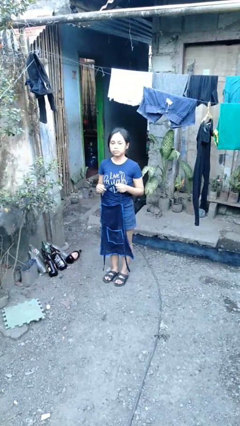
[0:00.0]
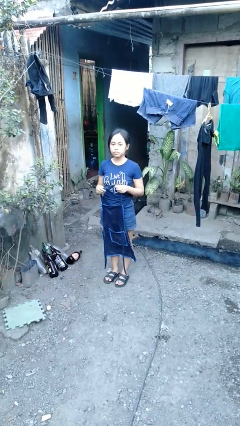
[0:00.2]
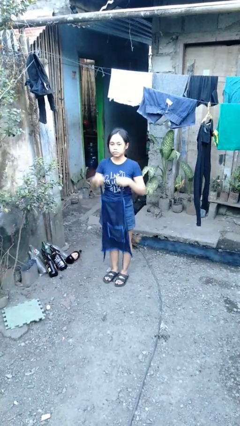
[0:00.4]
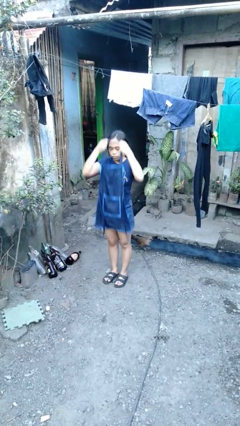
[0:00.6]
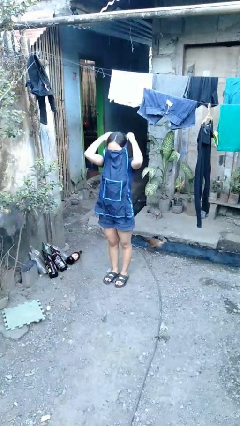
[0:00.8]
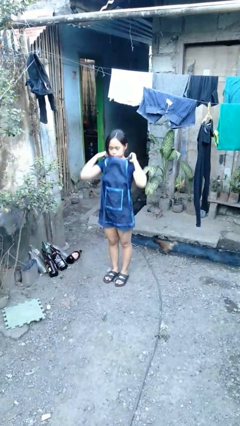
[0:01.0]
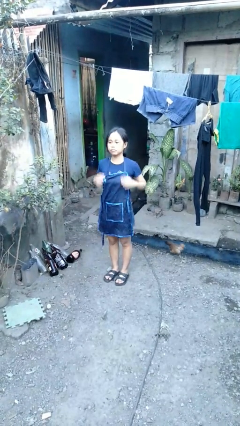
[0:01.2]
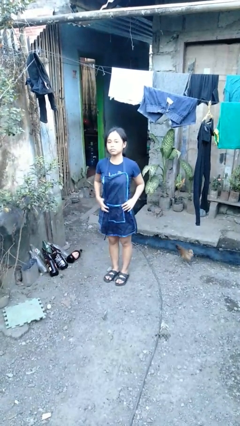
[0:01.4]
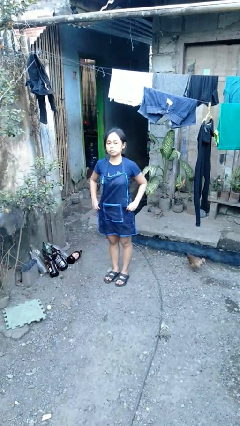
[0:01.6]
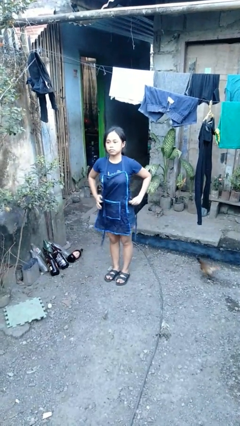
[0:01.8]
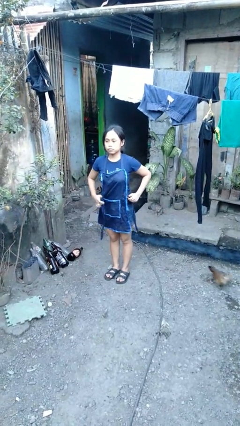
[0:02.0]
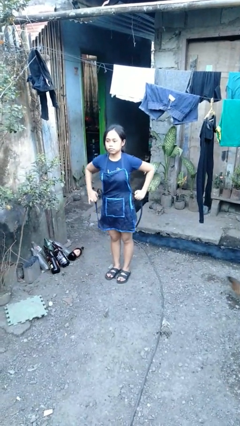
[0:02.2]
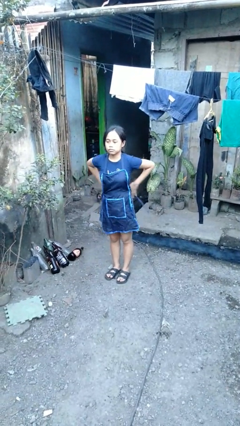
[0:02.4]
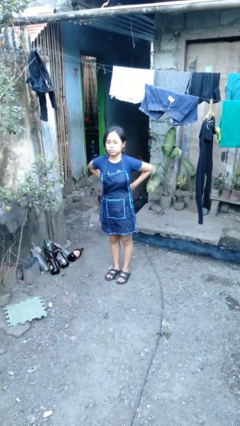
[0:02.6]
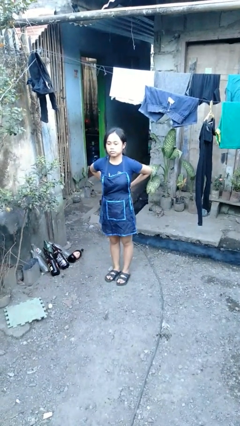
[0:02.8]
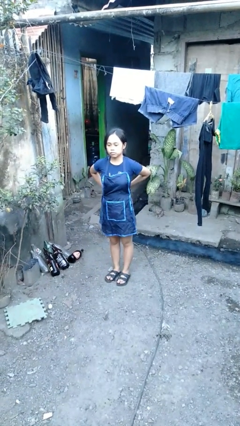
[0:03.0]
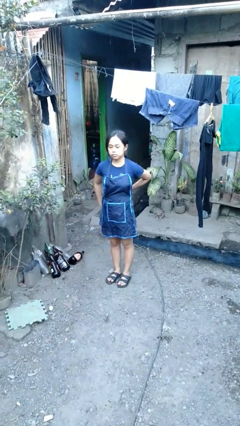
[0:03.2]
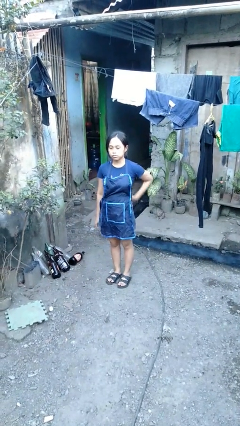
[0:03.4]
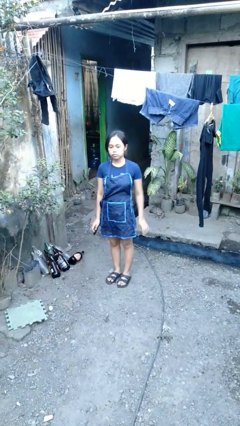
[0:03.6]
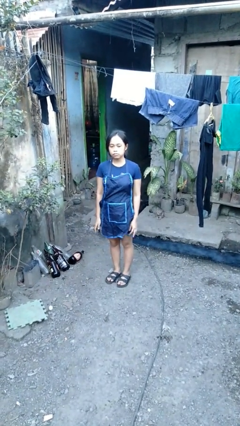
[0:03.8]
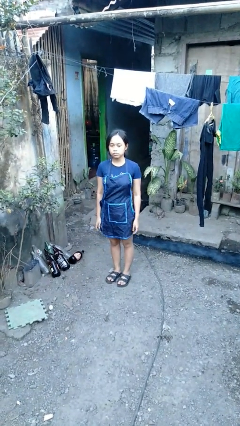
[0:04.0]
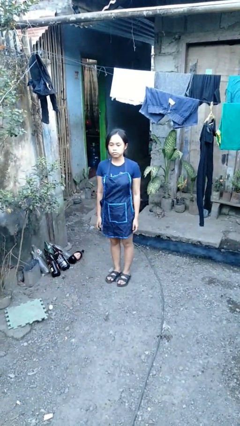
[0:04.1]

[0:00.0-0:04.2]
person puts on apron

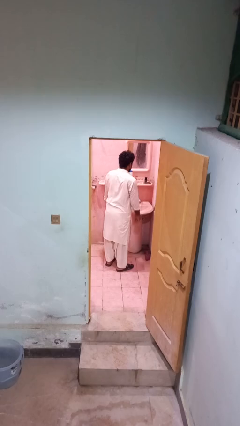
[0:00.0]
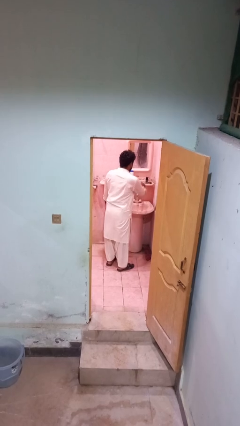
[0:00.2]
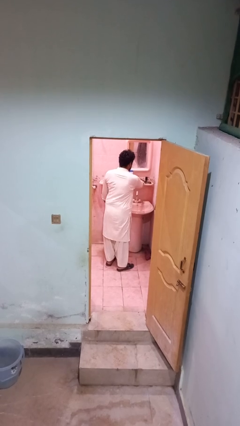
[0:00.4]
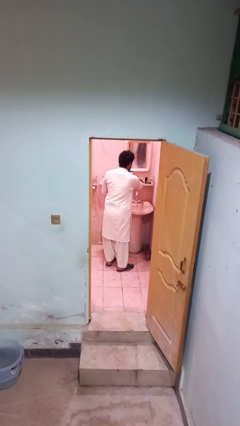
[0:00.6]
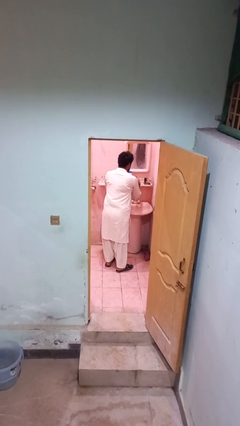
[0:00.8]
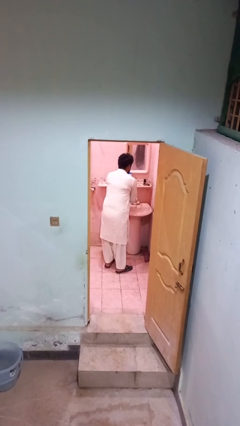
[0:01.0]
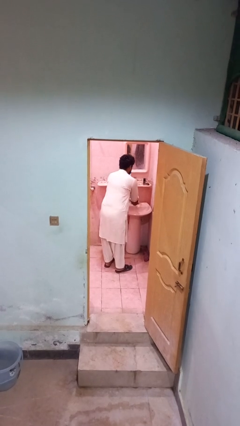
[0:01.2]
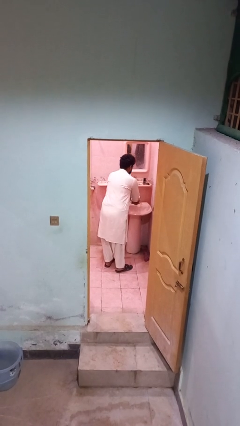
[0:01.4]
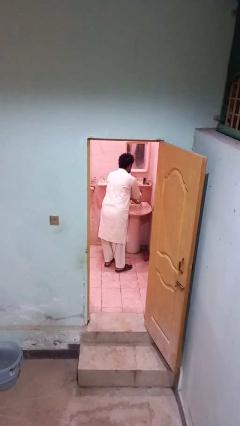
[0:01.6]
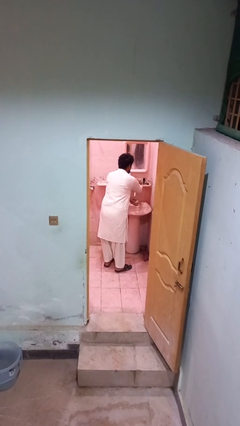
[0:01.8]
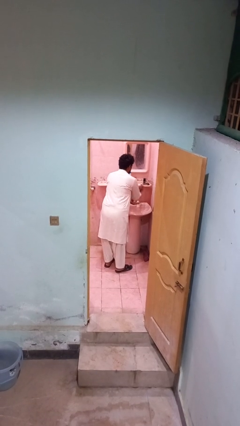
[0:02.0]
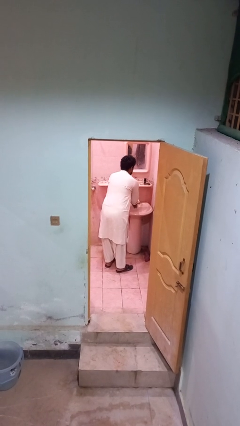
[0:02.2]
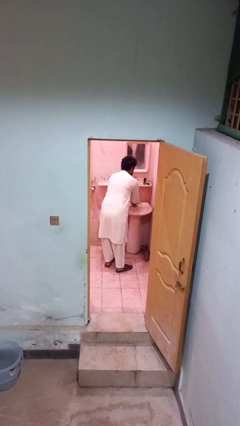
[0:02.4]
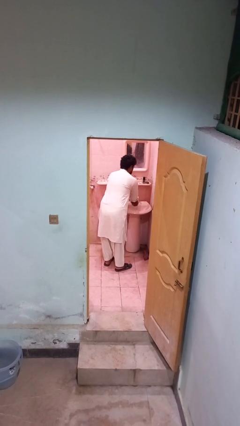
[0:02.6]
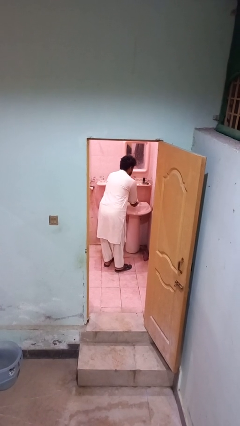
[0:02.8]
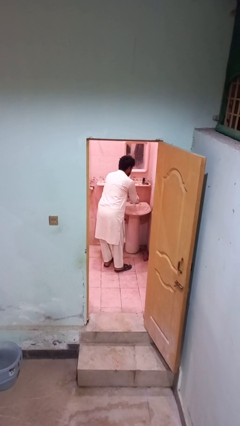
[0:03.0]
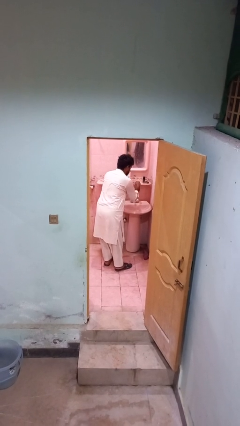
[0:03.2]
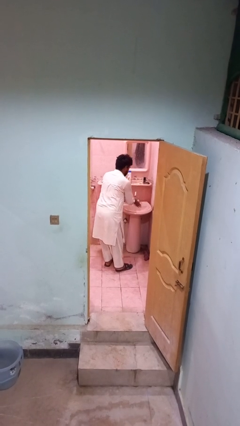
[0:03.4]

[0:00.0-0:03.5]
person washes hands

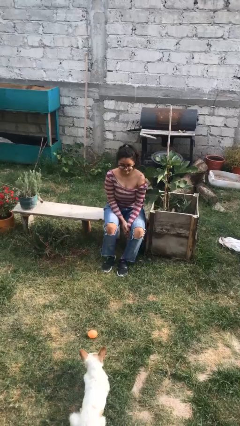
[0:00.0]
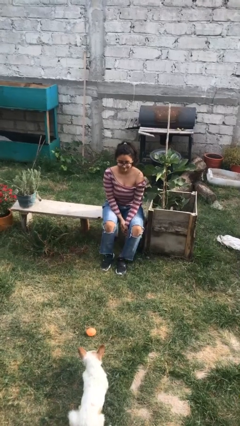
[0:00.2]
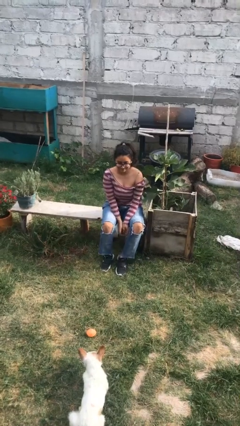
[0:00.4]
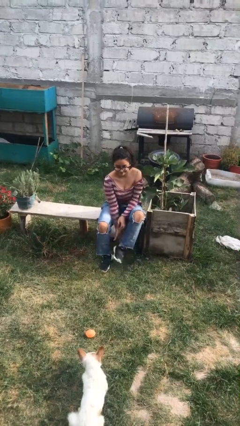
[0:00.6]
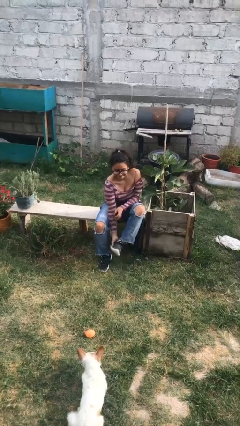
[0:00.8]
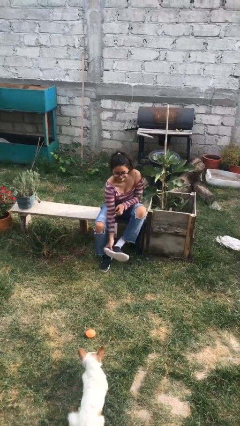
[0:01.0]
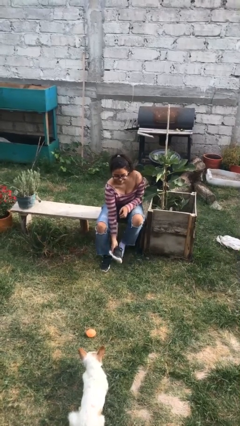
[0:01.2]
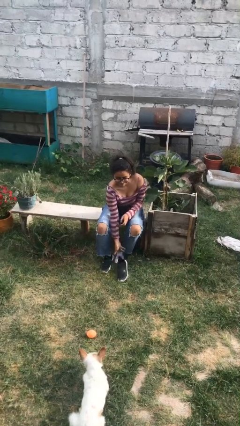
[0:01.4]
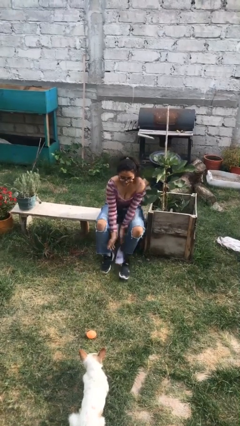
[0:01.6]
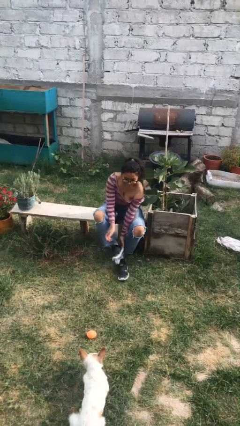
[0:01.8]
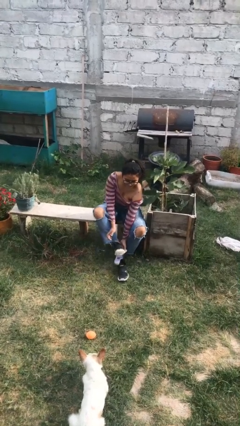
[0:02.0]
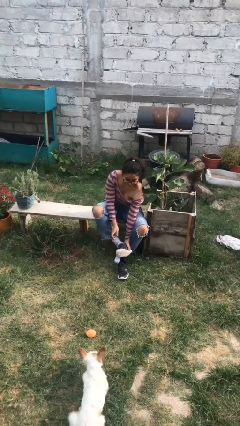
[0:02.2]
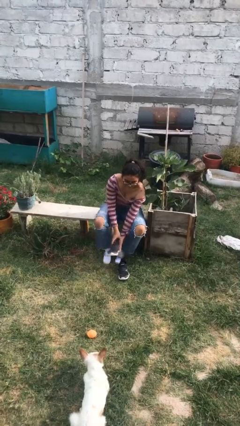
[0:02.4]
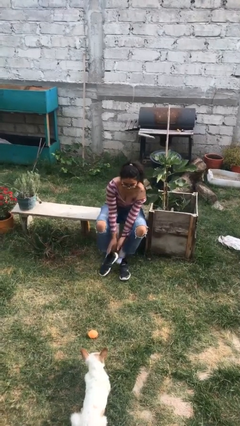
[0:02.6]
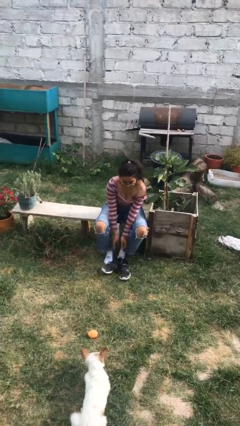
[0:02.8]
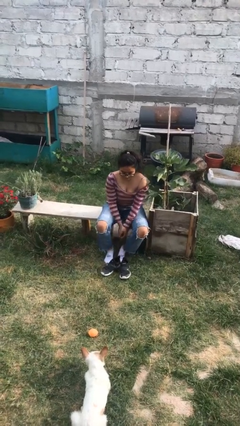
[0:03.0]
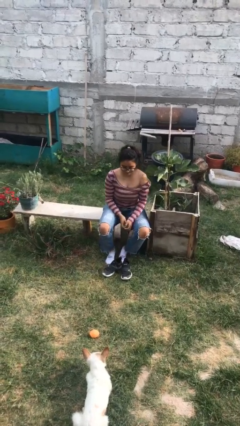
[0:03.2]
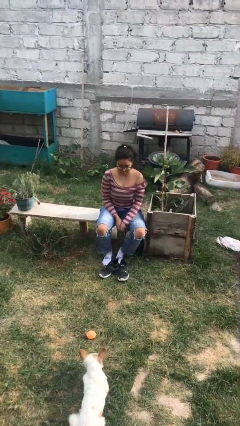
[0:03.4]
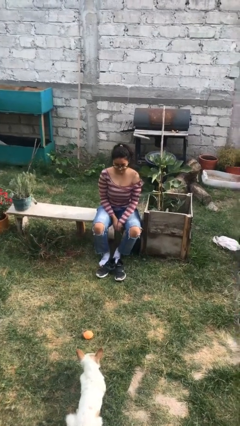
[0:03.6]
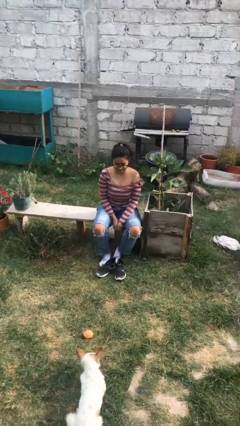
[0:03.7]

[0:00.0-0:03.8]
person takes off shoes

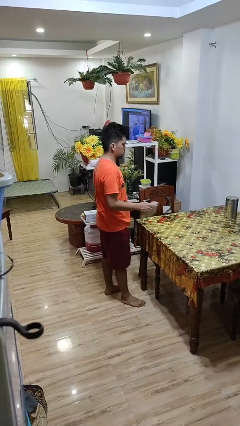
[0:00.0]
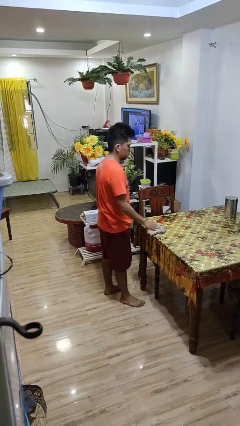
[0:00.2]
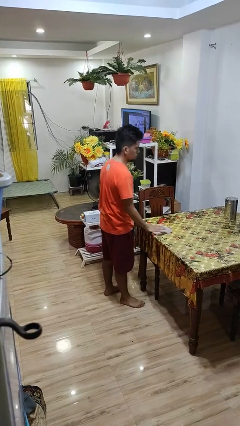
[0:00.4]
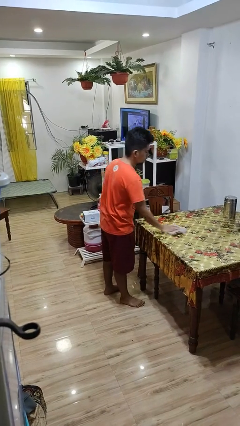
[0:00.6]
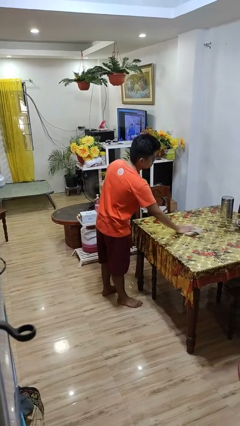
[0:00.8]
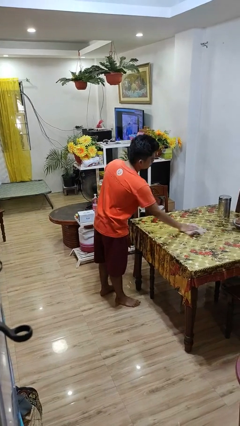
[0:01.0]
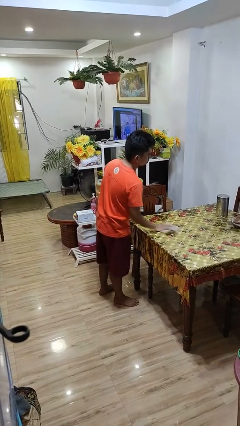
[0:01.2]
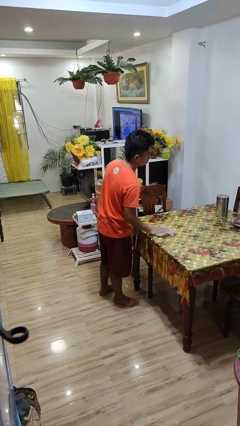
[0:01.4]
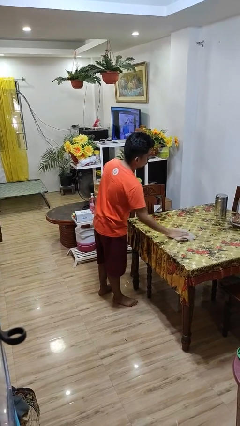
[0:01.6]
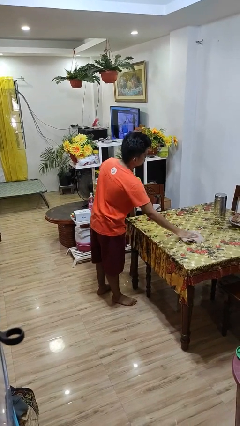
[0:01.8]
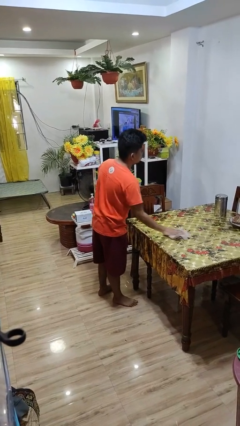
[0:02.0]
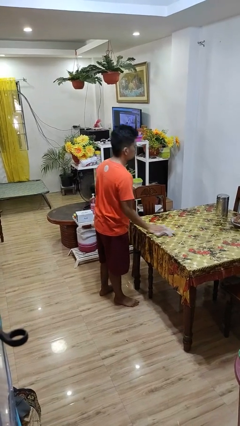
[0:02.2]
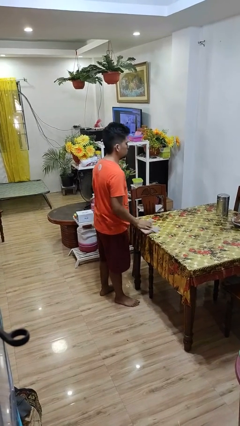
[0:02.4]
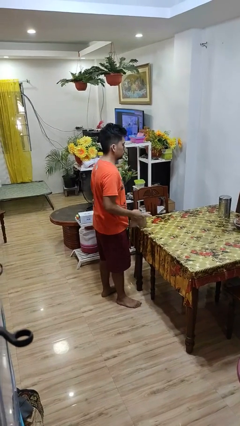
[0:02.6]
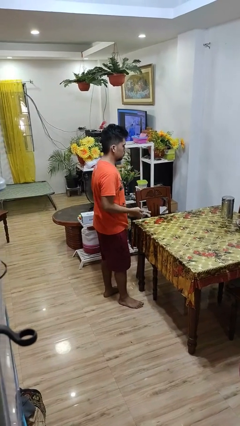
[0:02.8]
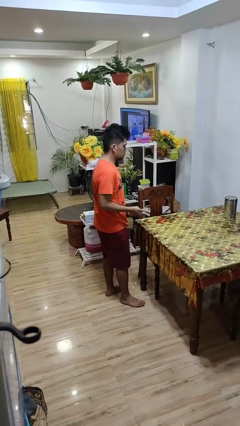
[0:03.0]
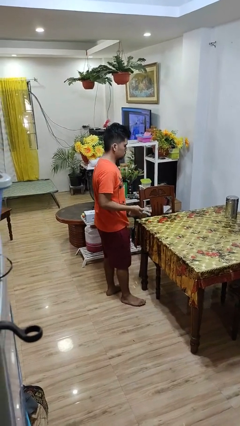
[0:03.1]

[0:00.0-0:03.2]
person cleans table with rag

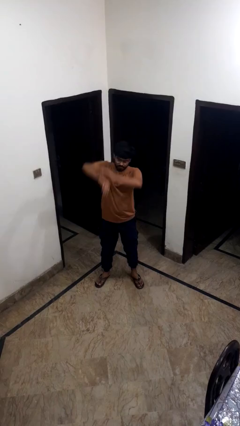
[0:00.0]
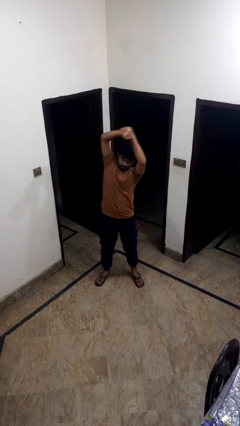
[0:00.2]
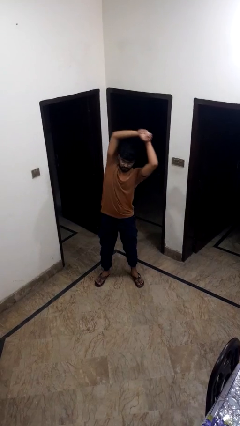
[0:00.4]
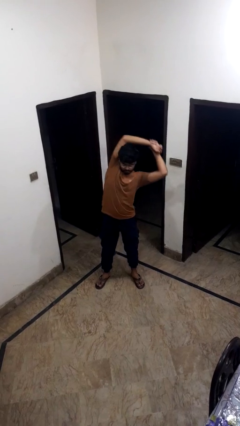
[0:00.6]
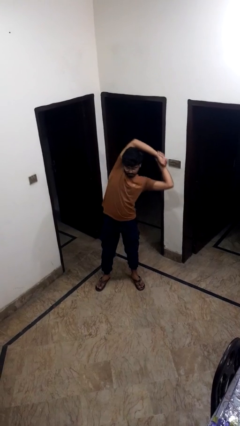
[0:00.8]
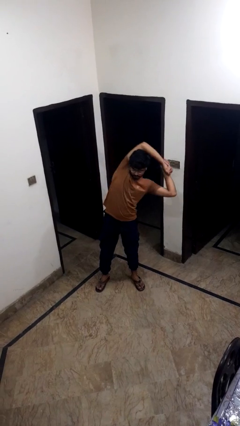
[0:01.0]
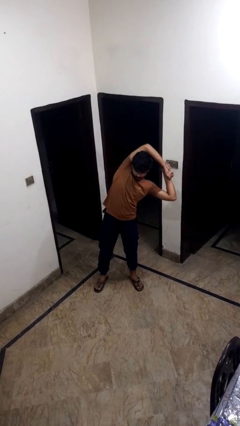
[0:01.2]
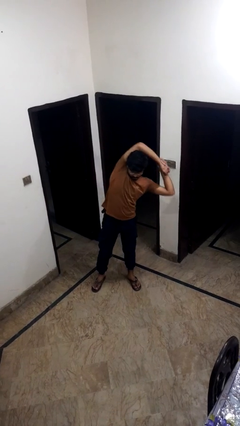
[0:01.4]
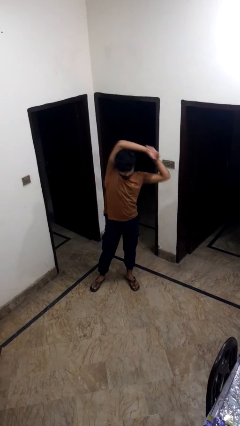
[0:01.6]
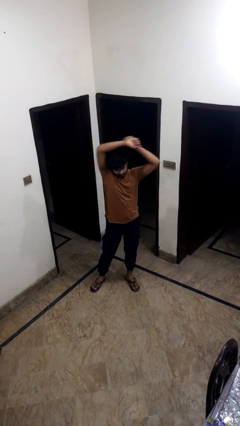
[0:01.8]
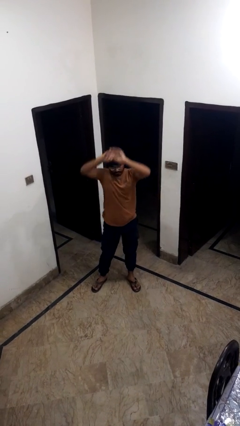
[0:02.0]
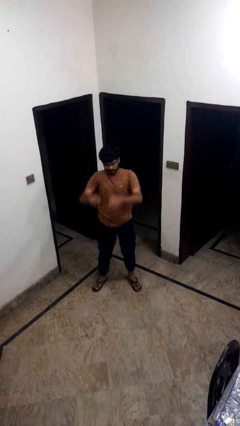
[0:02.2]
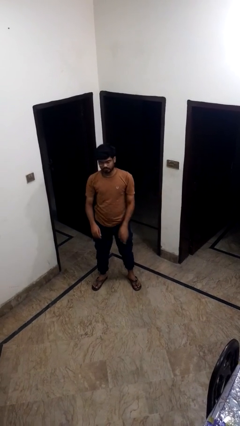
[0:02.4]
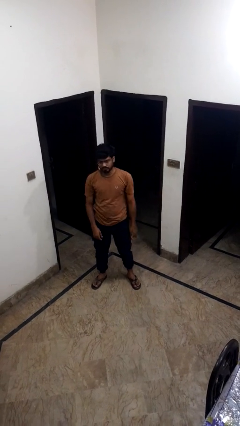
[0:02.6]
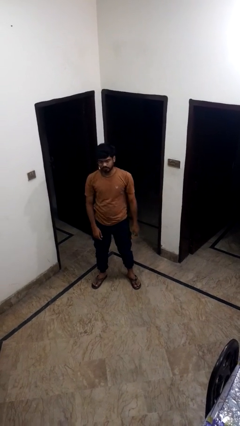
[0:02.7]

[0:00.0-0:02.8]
person unties jacket around waist
